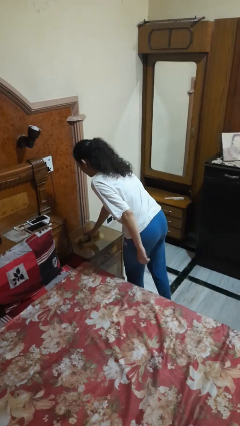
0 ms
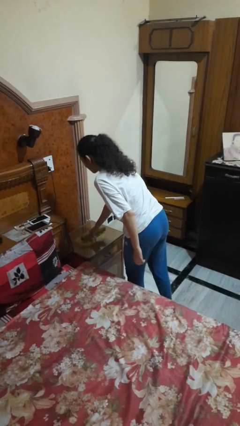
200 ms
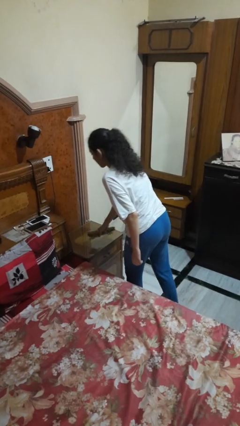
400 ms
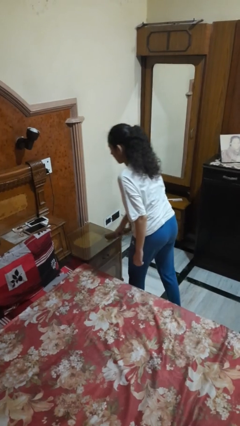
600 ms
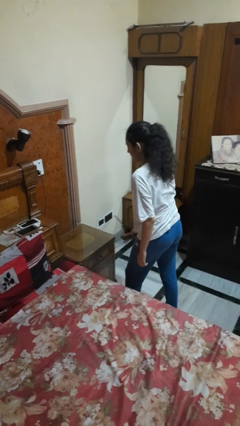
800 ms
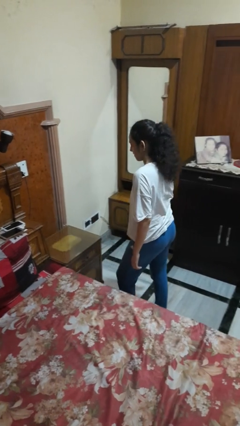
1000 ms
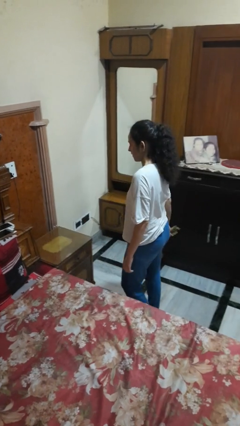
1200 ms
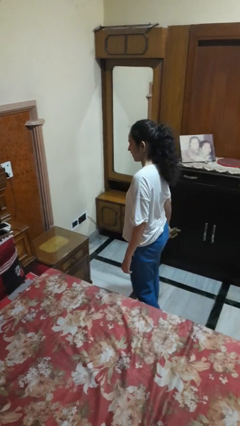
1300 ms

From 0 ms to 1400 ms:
person picks up object from table

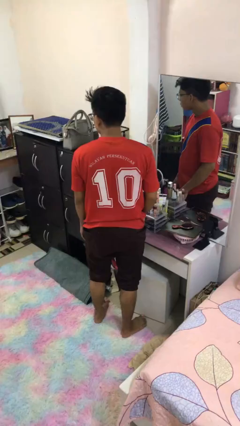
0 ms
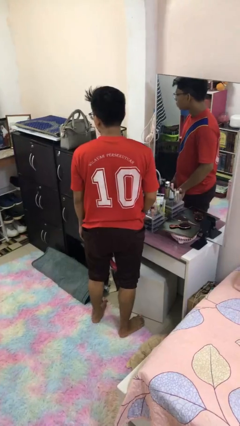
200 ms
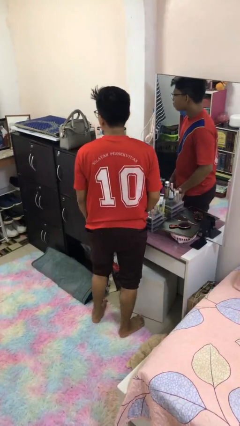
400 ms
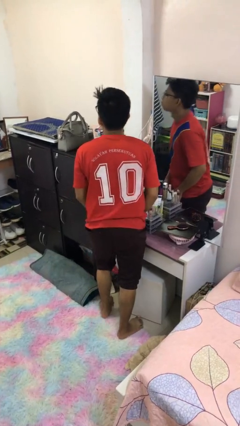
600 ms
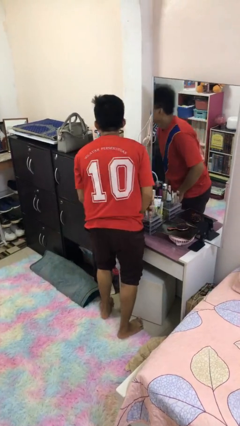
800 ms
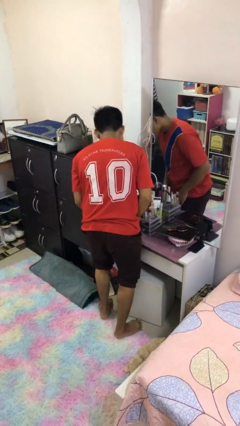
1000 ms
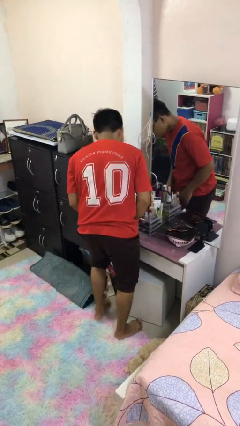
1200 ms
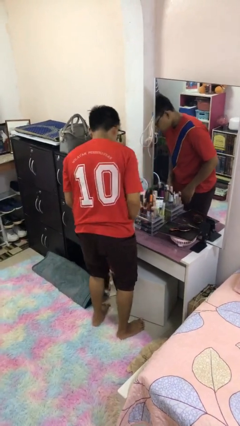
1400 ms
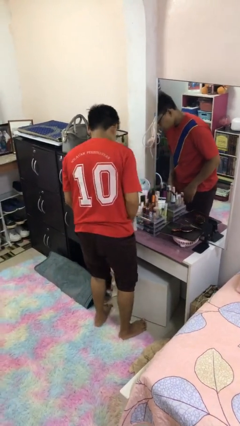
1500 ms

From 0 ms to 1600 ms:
person bumps into table

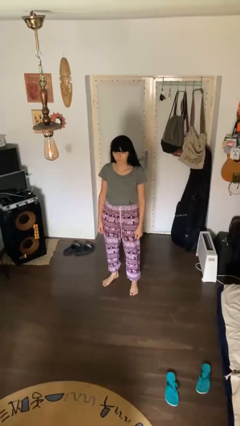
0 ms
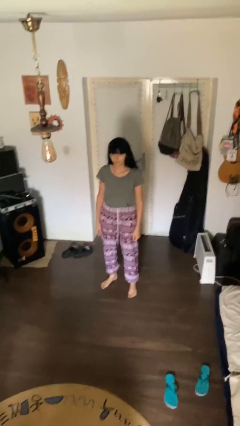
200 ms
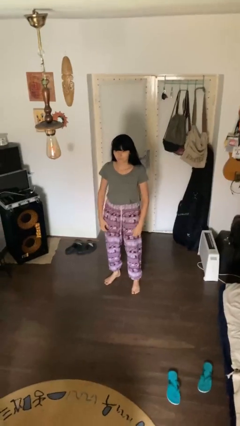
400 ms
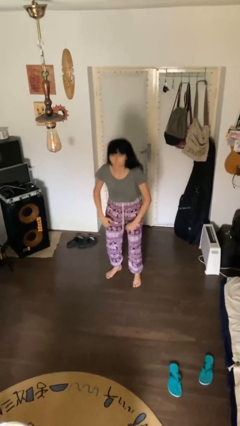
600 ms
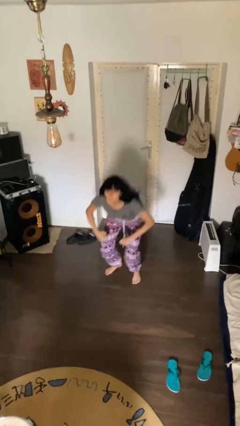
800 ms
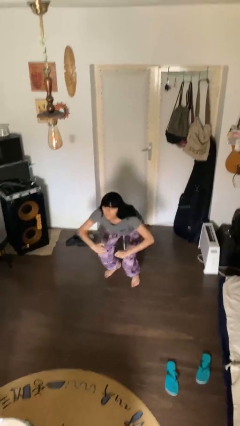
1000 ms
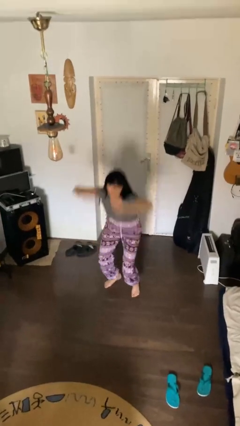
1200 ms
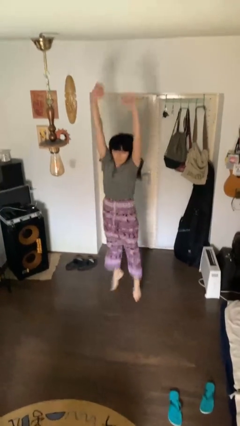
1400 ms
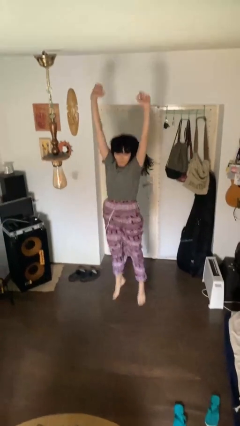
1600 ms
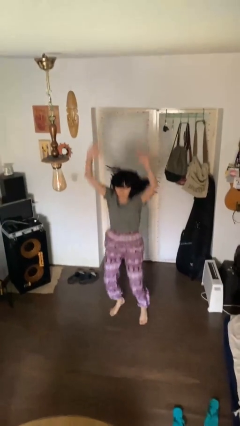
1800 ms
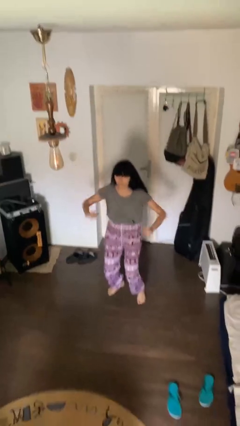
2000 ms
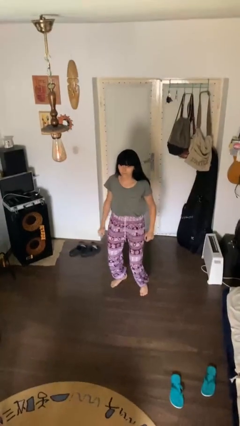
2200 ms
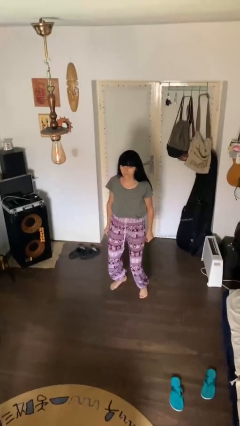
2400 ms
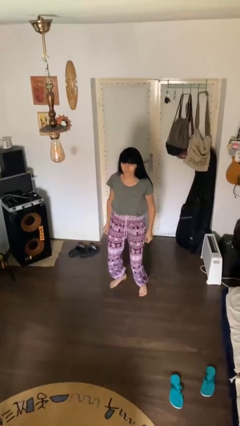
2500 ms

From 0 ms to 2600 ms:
person jumps

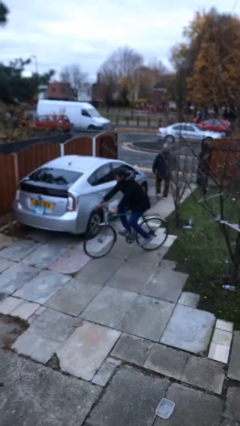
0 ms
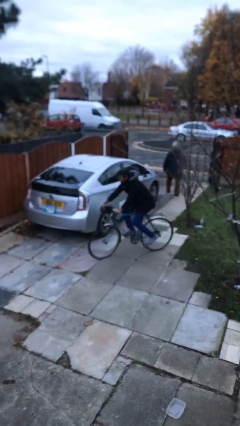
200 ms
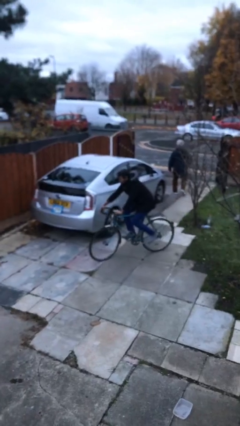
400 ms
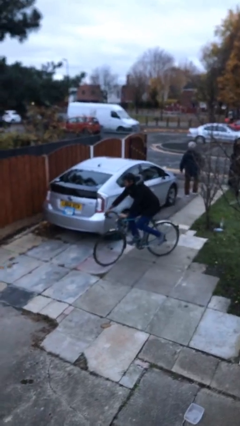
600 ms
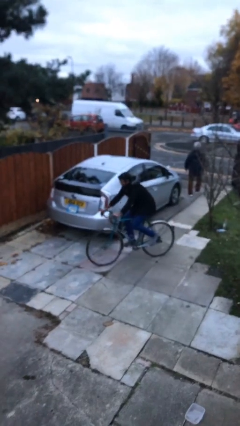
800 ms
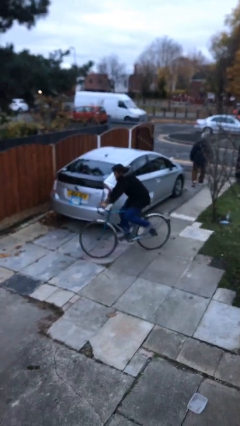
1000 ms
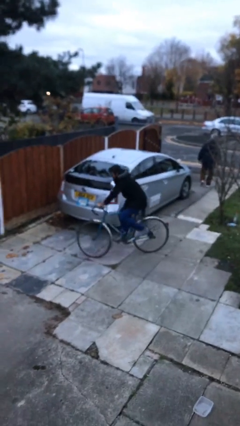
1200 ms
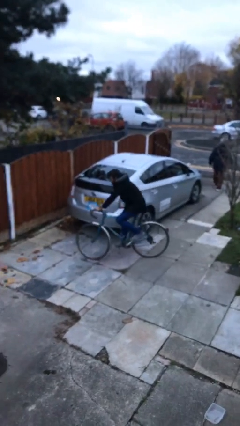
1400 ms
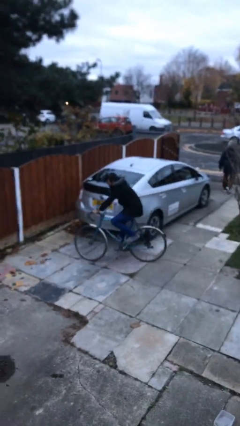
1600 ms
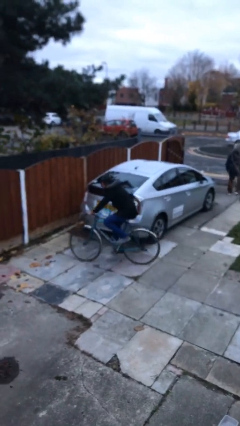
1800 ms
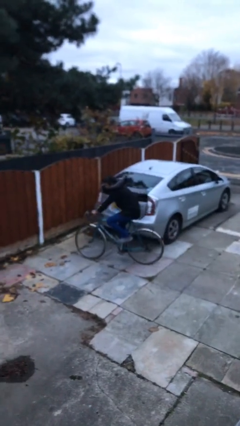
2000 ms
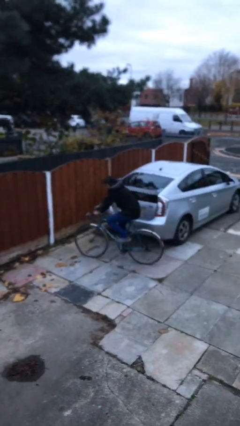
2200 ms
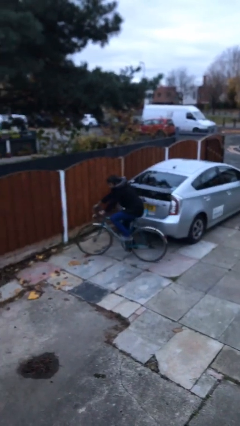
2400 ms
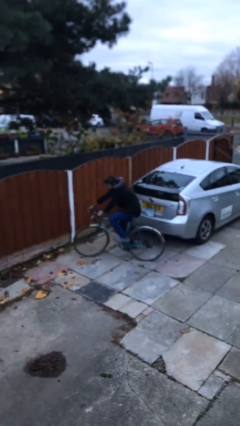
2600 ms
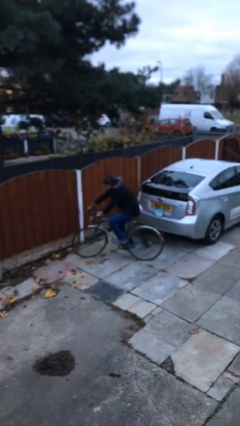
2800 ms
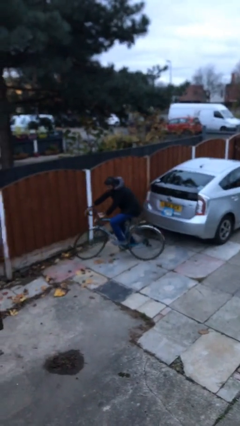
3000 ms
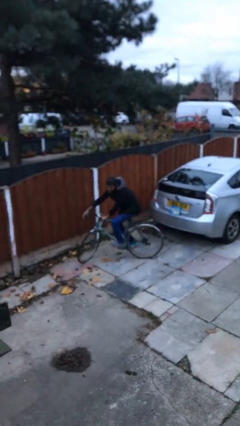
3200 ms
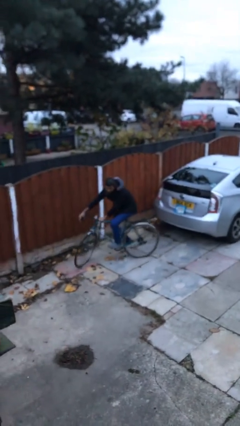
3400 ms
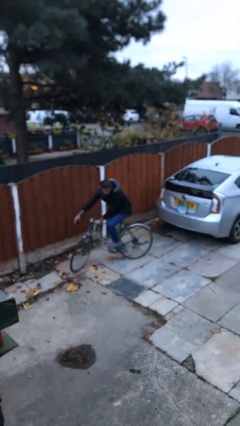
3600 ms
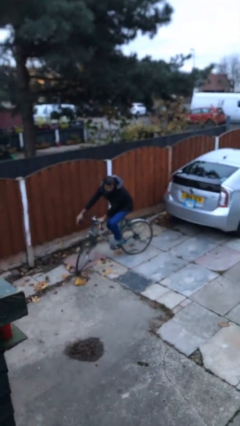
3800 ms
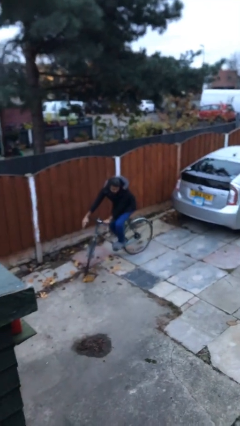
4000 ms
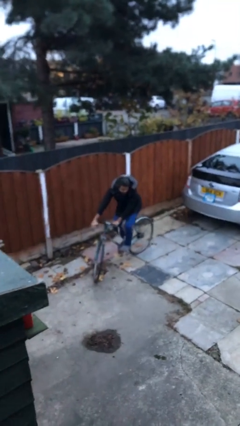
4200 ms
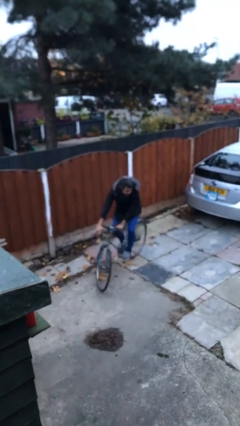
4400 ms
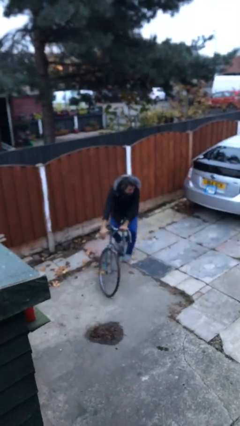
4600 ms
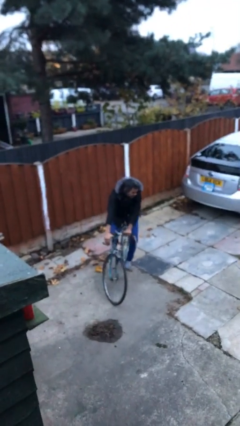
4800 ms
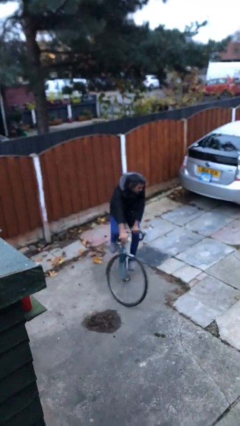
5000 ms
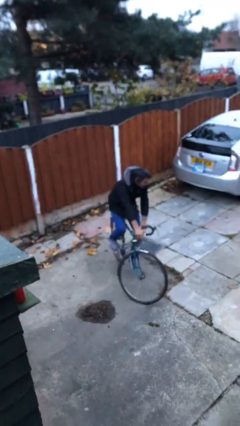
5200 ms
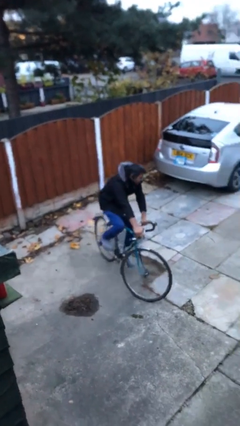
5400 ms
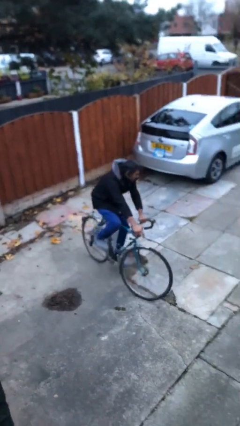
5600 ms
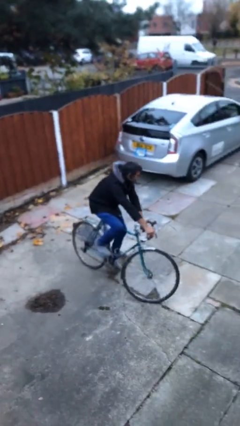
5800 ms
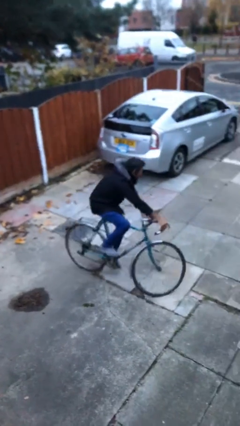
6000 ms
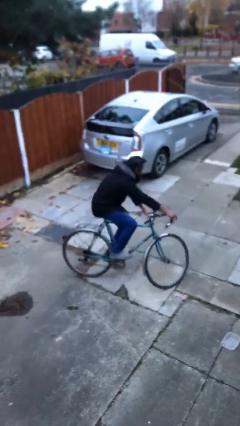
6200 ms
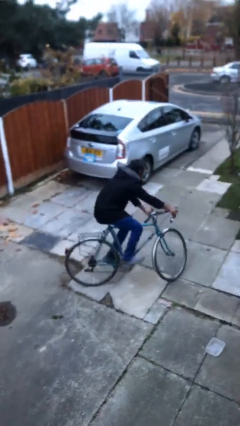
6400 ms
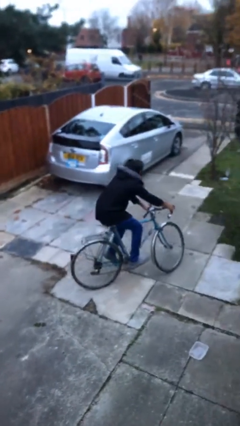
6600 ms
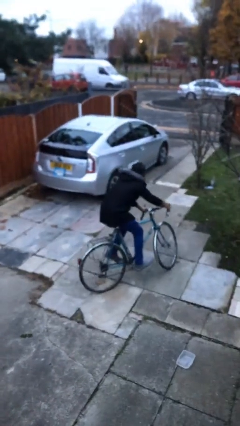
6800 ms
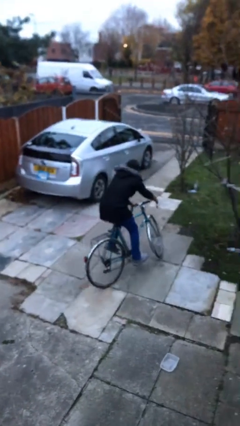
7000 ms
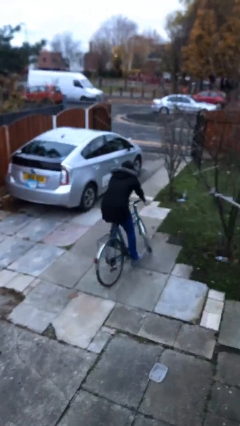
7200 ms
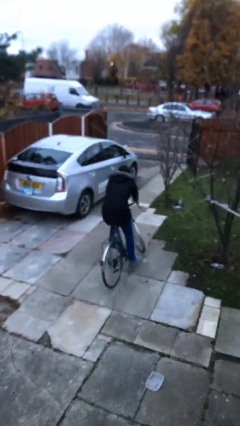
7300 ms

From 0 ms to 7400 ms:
person rides bicycle

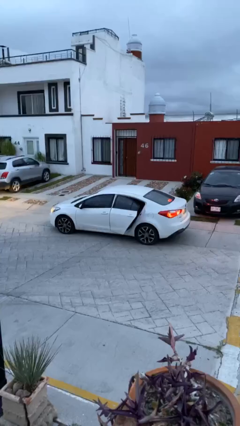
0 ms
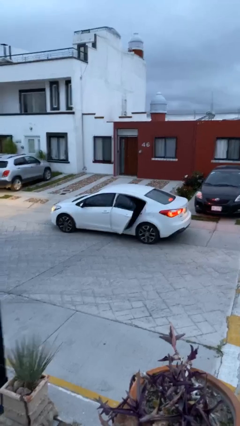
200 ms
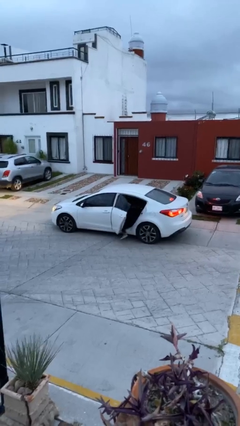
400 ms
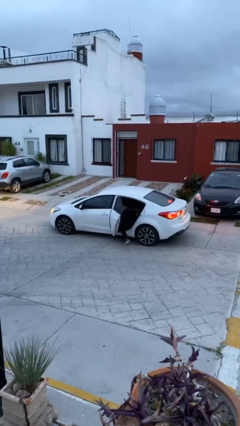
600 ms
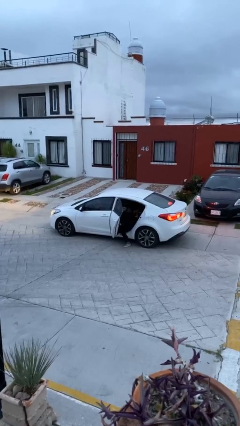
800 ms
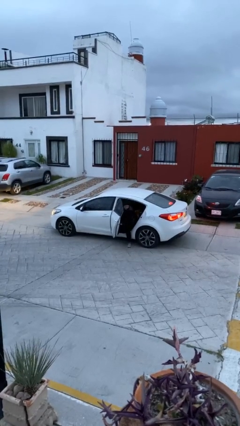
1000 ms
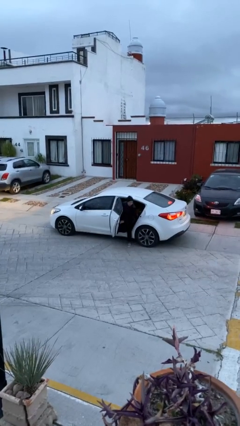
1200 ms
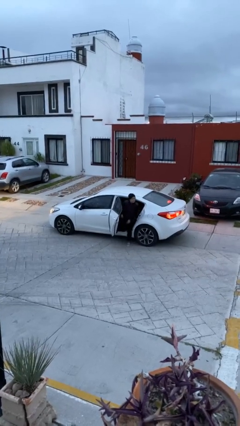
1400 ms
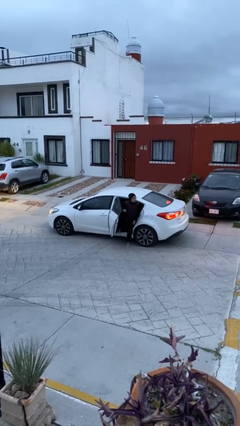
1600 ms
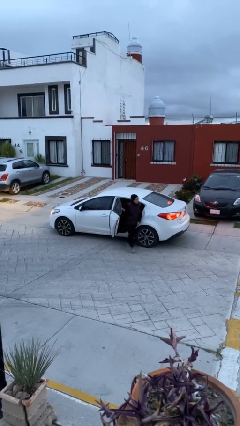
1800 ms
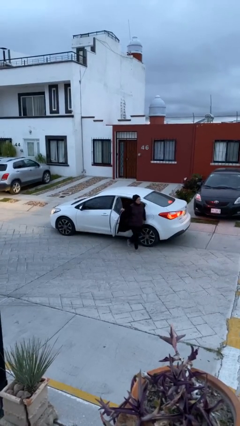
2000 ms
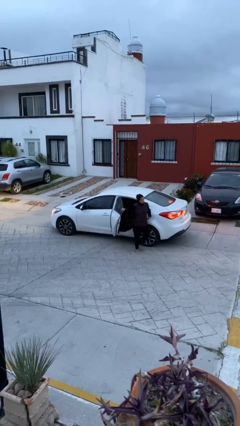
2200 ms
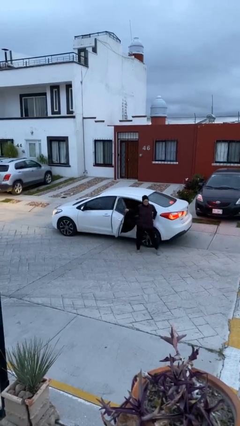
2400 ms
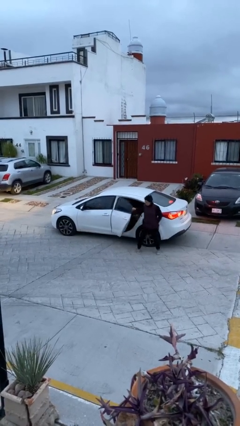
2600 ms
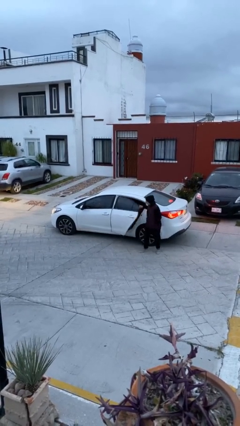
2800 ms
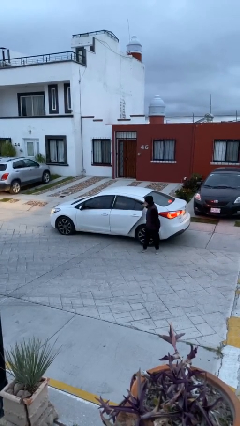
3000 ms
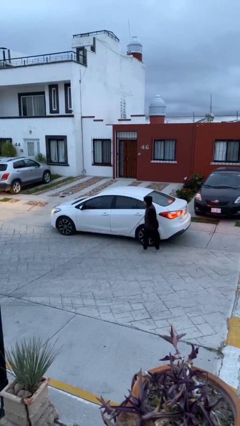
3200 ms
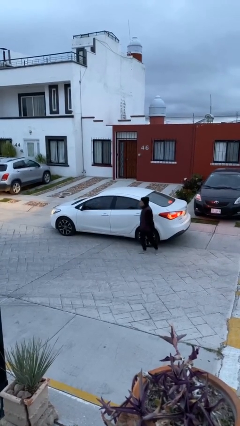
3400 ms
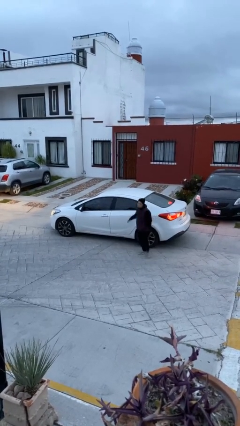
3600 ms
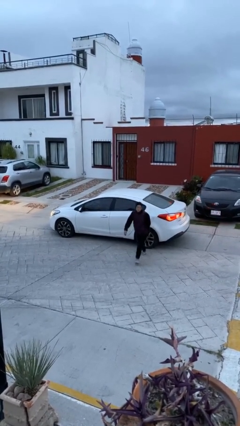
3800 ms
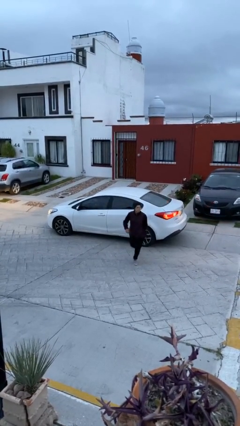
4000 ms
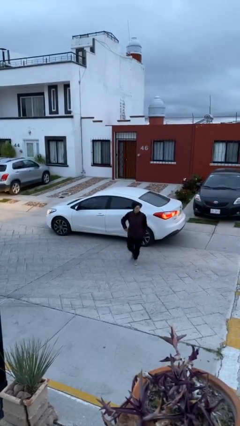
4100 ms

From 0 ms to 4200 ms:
car drops off person

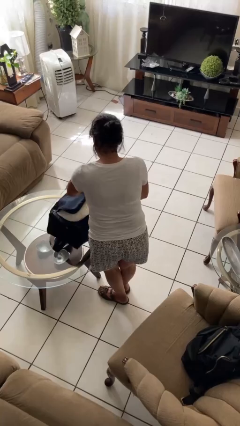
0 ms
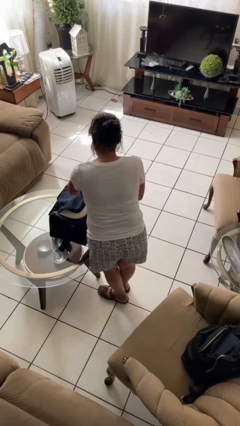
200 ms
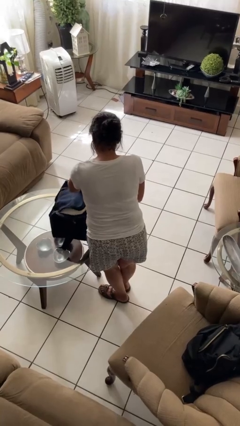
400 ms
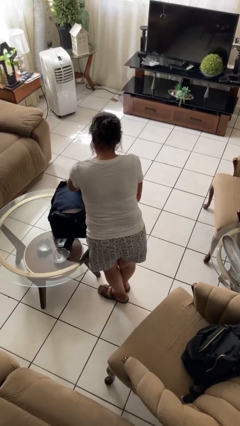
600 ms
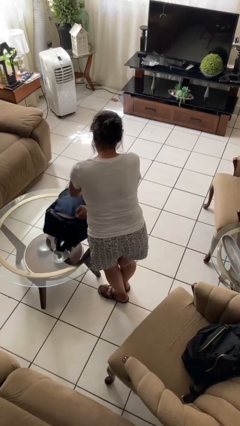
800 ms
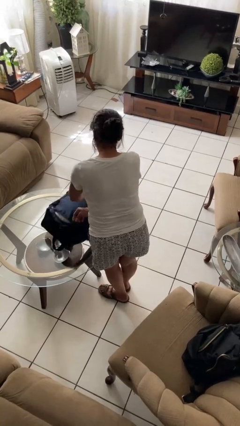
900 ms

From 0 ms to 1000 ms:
person closes suitcase
